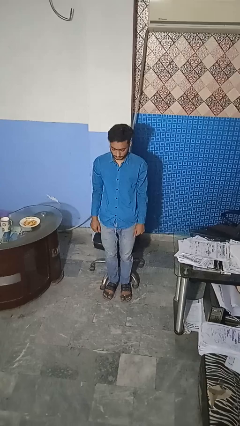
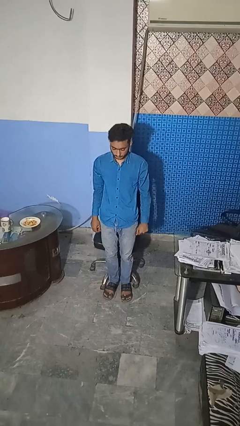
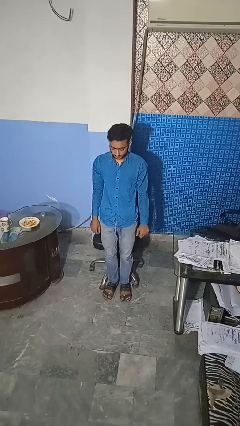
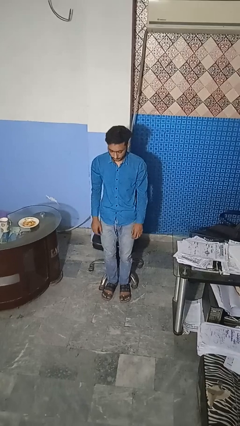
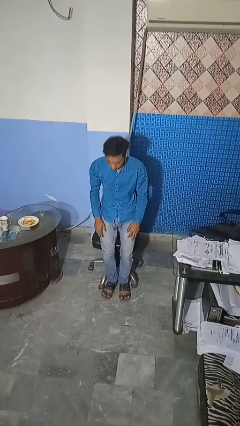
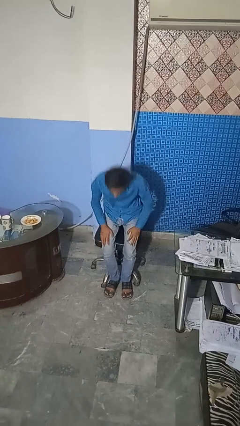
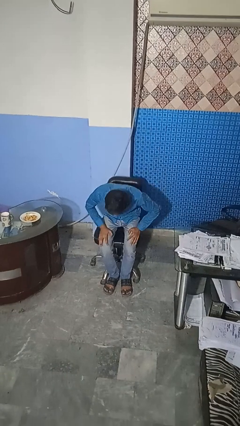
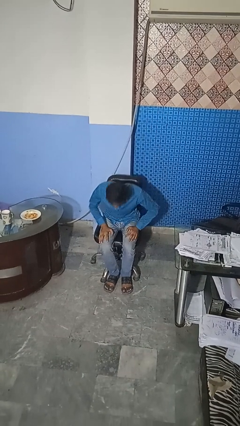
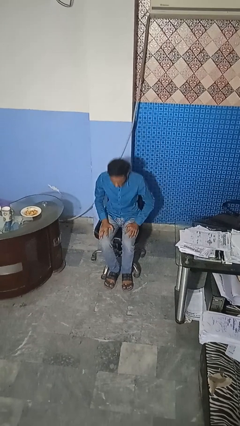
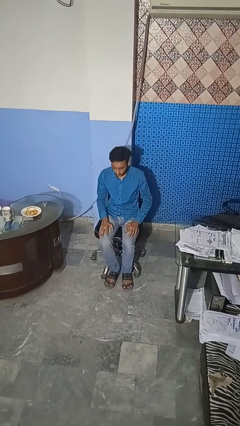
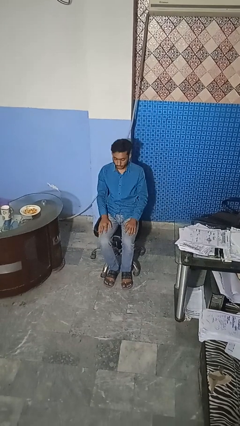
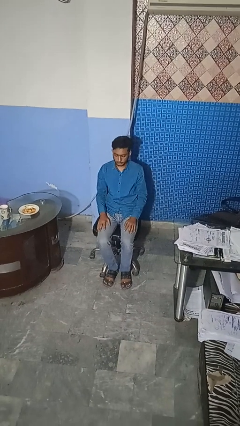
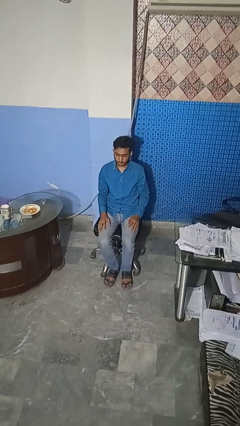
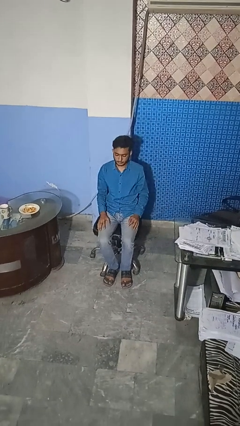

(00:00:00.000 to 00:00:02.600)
person sits down

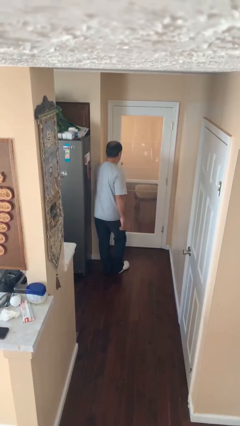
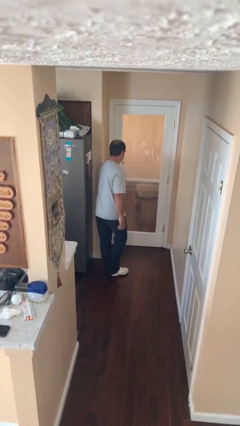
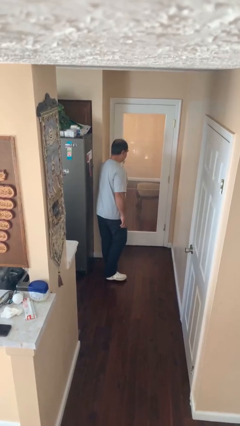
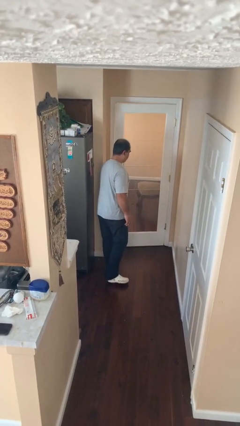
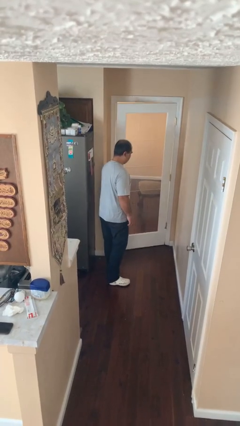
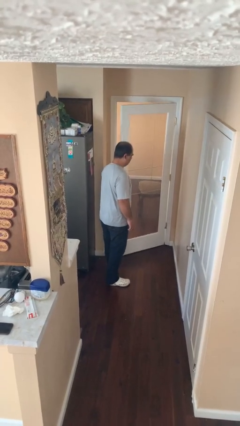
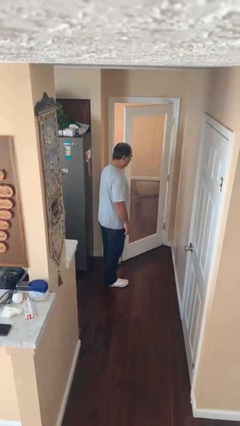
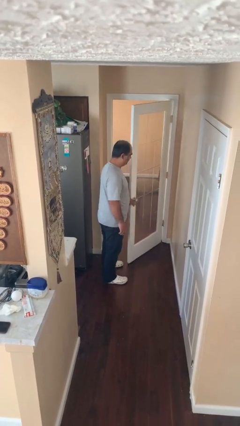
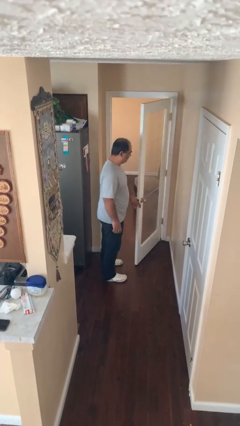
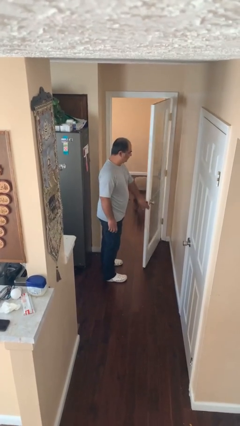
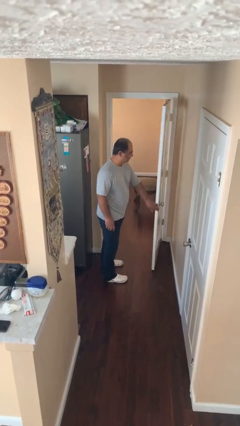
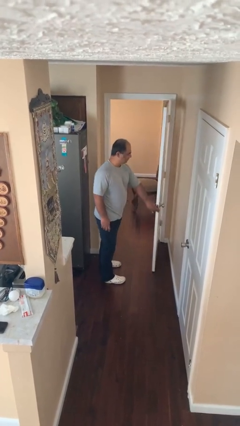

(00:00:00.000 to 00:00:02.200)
person opens facility door

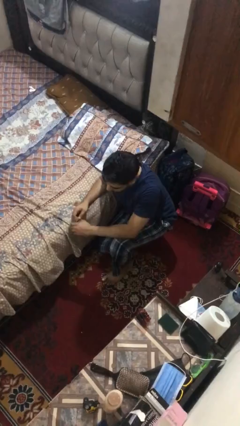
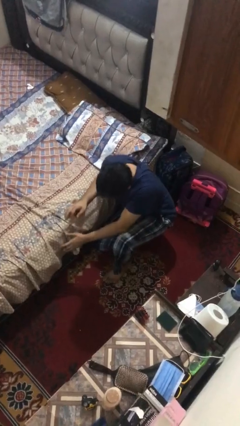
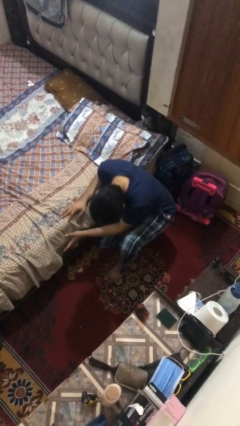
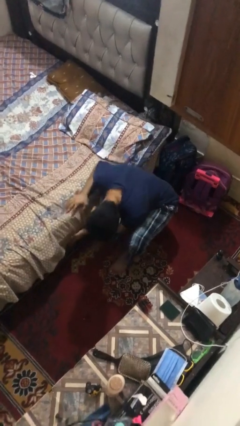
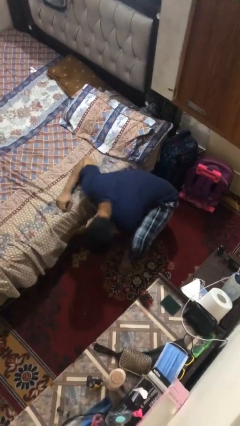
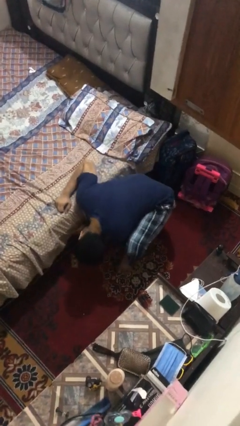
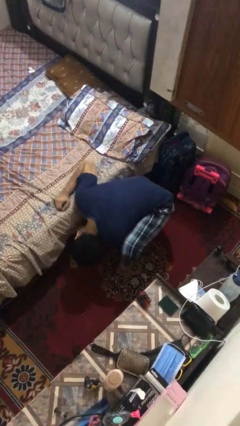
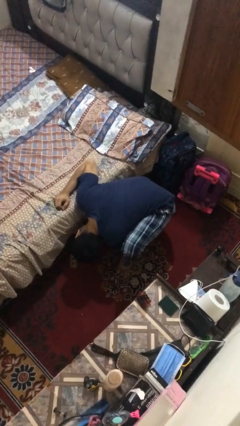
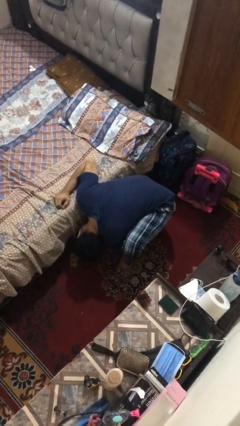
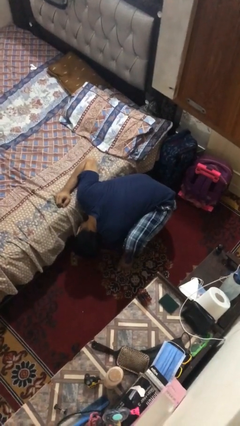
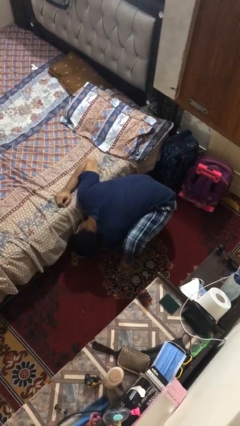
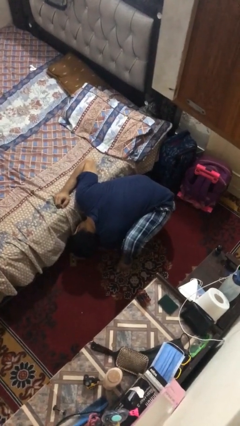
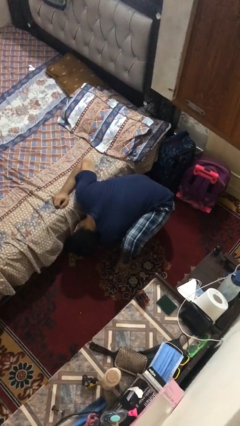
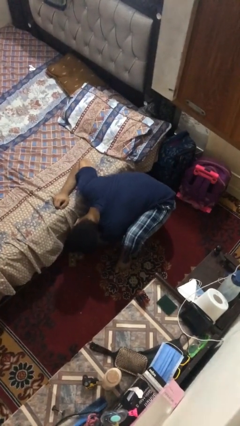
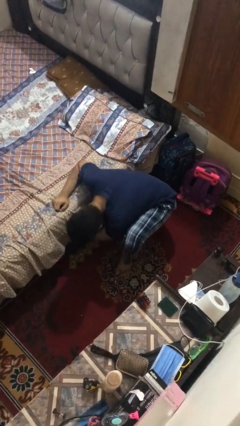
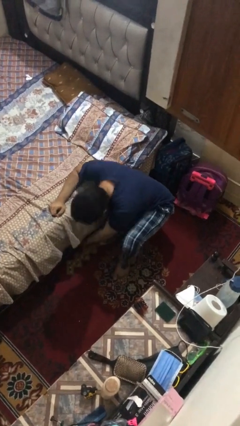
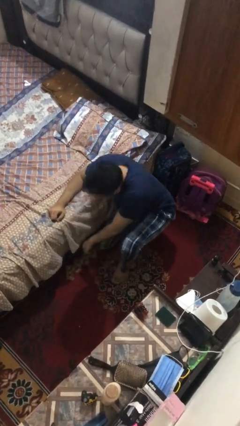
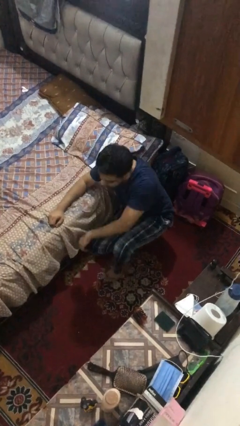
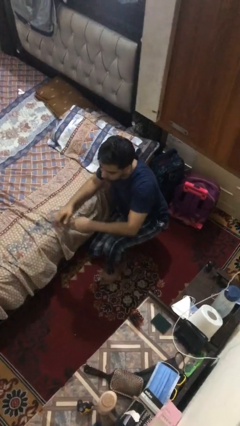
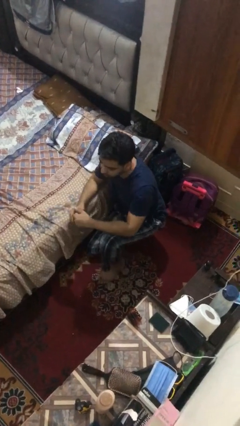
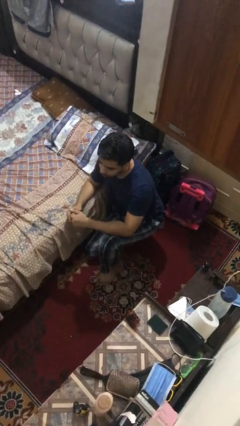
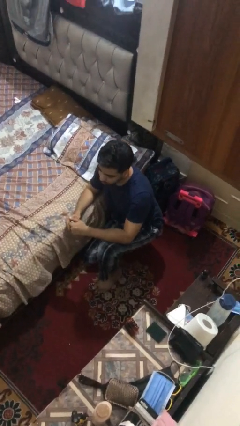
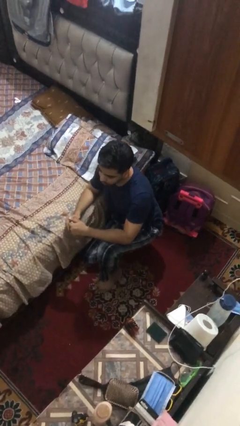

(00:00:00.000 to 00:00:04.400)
person searches under bed

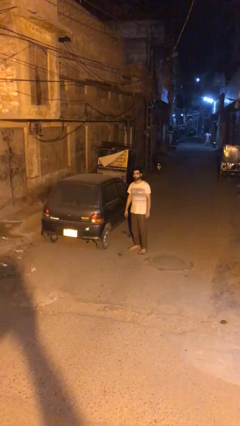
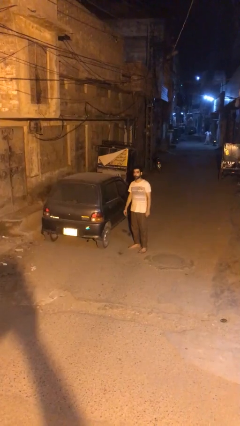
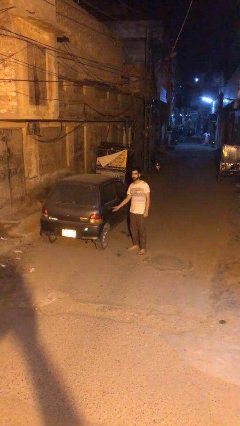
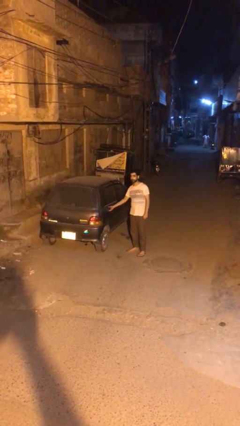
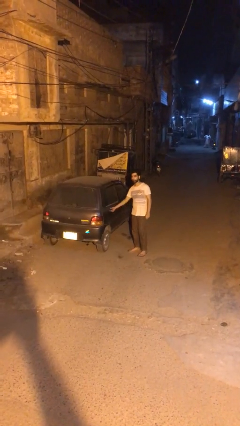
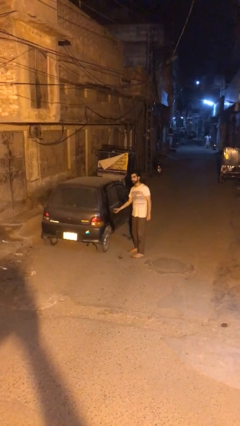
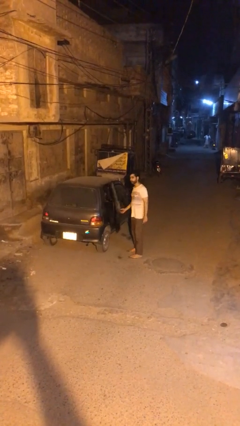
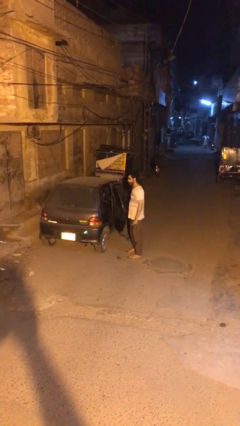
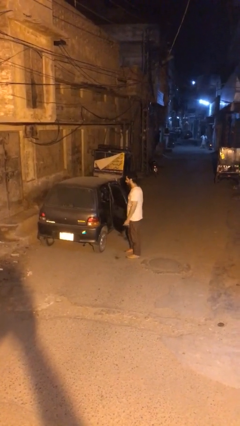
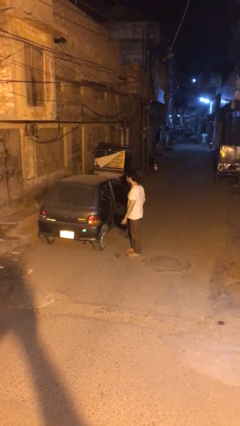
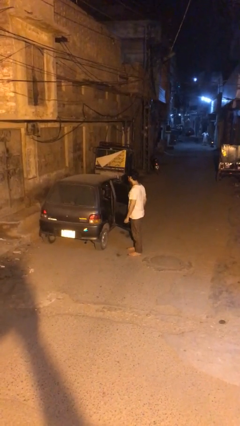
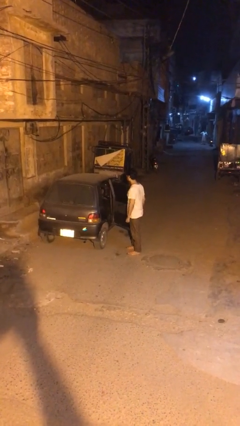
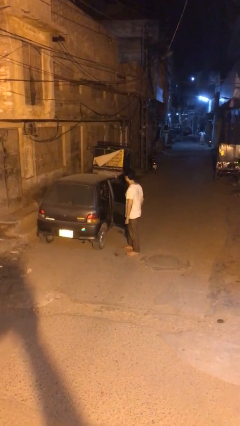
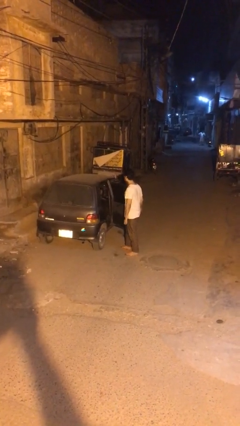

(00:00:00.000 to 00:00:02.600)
person opens car door

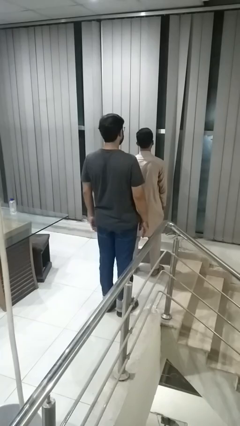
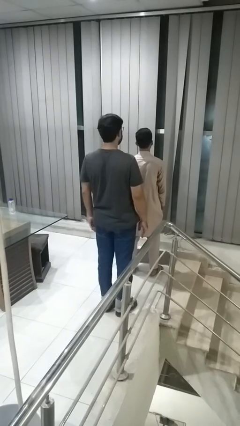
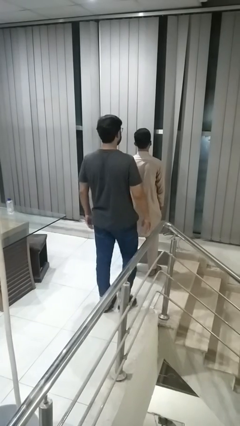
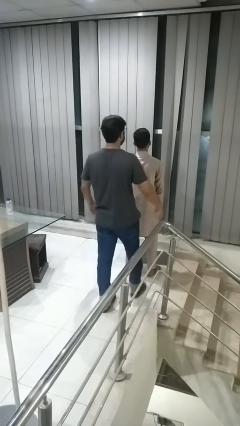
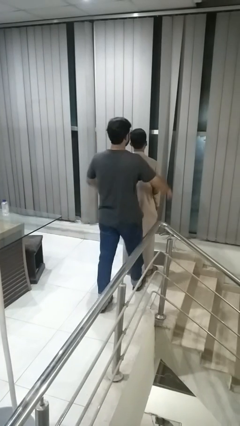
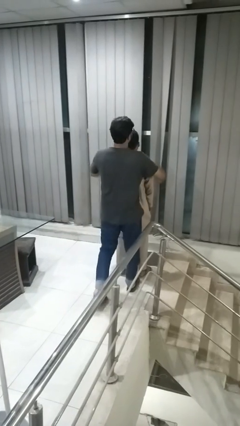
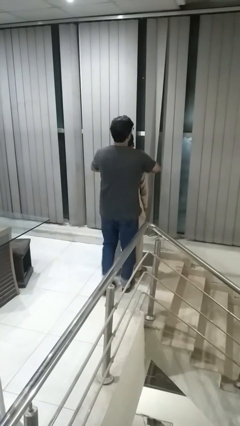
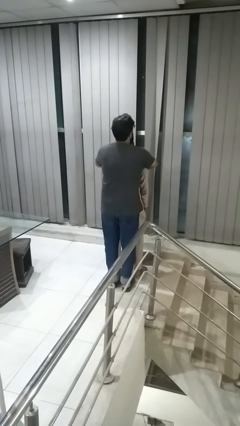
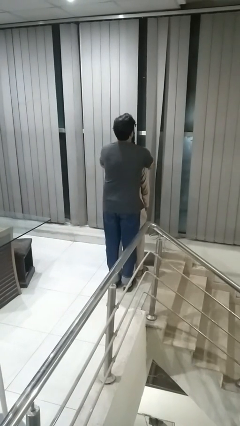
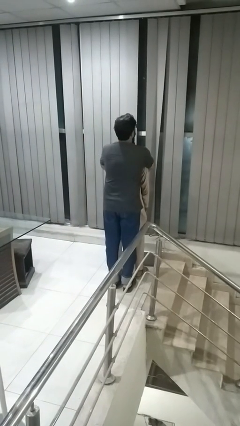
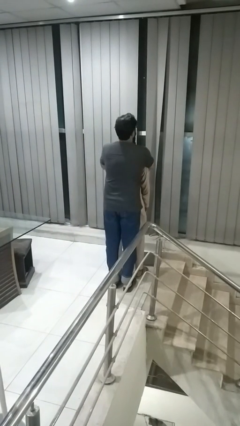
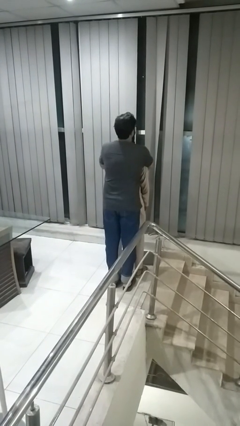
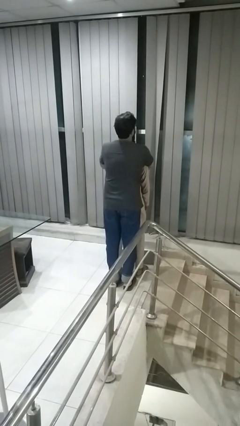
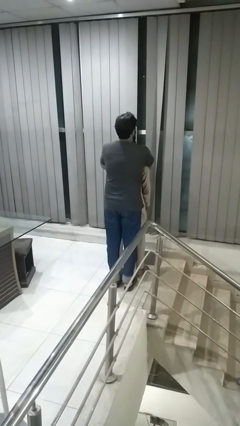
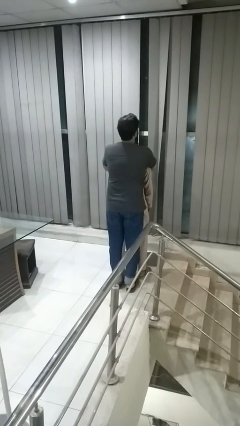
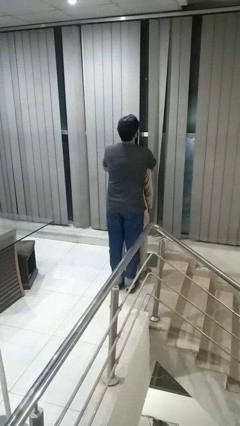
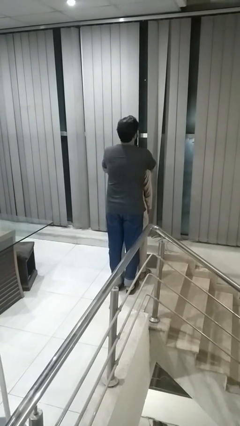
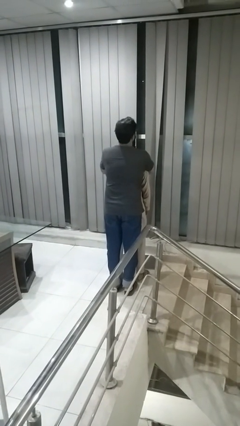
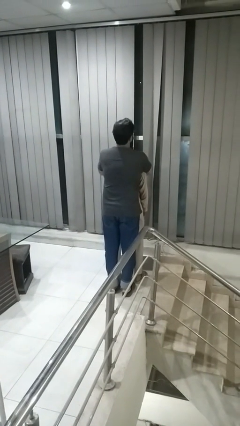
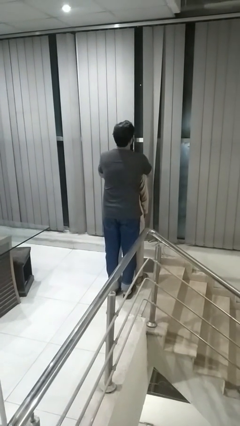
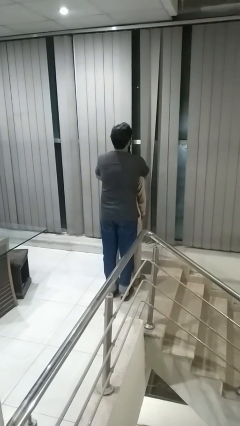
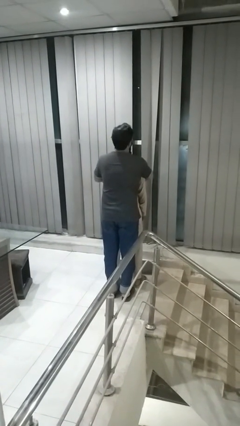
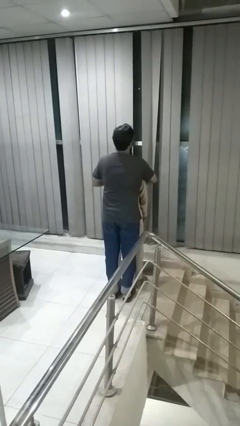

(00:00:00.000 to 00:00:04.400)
person hugs person from behind

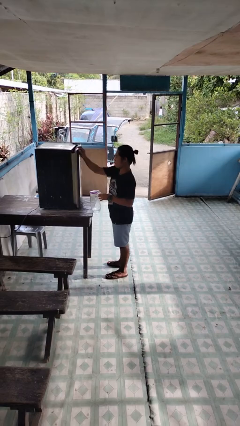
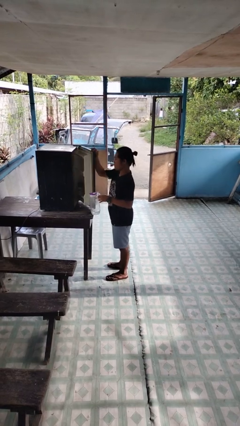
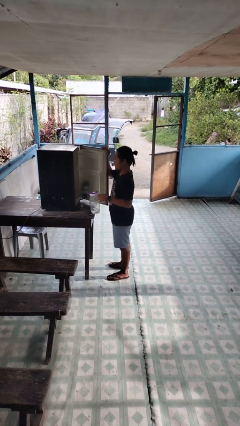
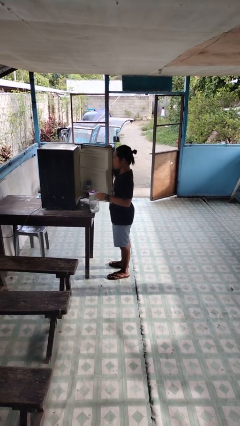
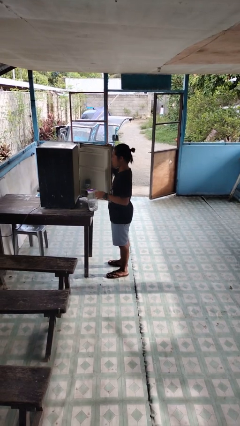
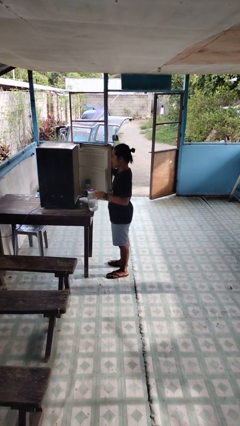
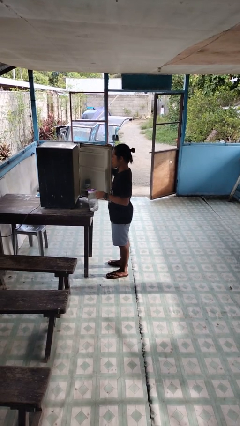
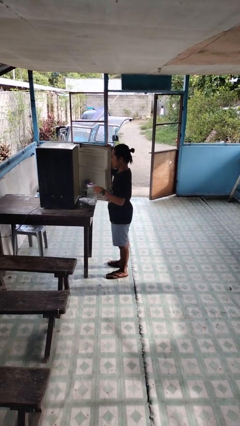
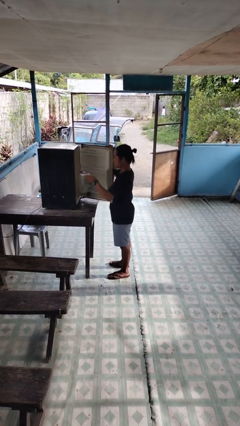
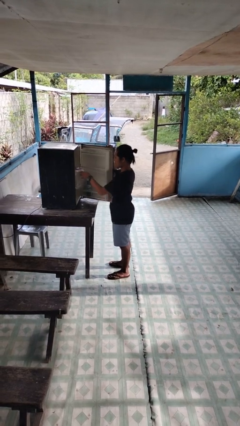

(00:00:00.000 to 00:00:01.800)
person opens refrigerator
